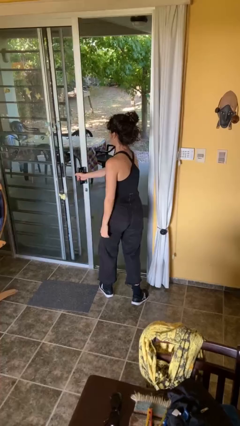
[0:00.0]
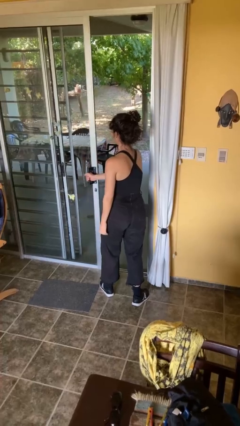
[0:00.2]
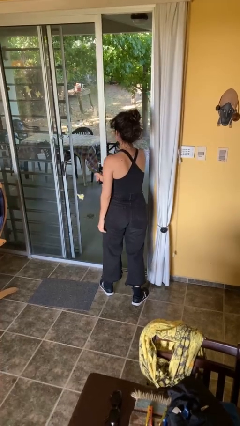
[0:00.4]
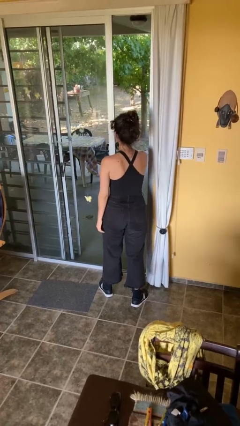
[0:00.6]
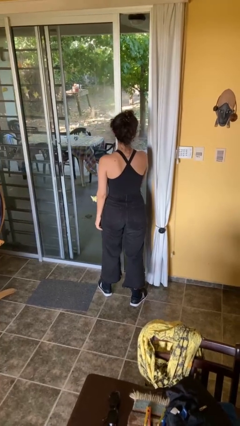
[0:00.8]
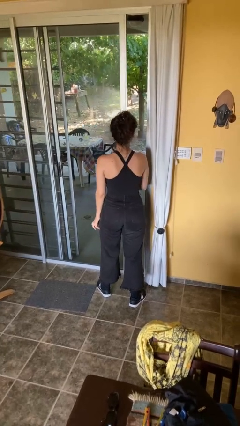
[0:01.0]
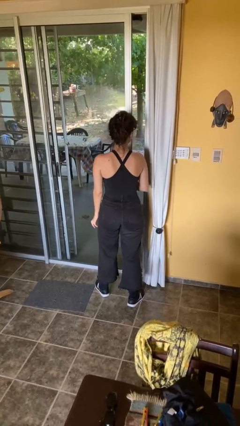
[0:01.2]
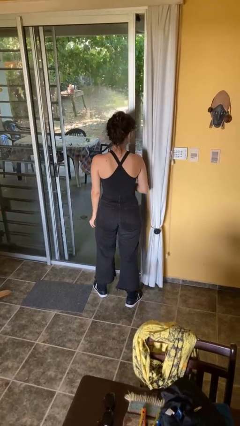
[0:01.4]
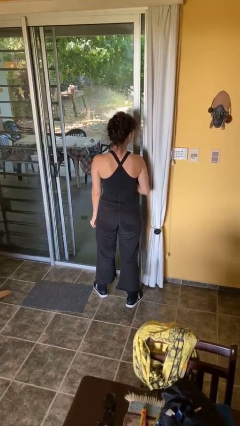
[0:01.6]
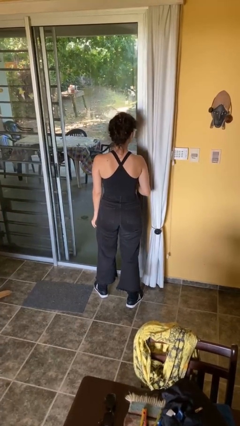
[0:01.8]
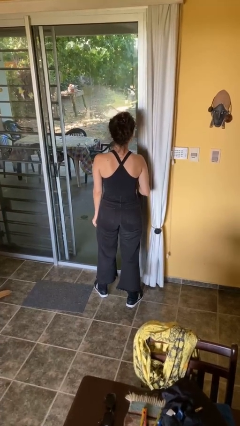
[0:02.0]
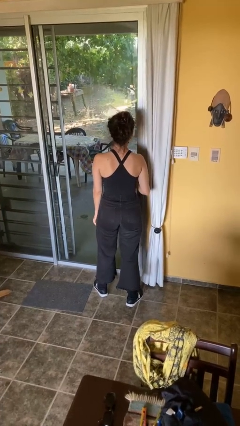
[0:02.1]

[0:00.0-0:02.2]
person closes facility door

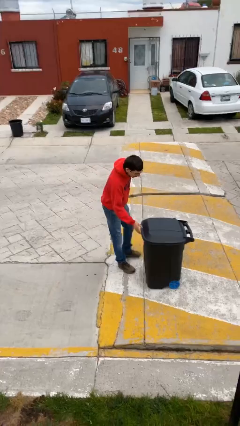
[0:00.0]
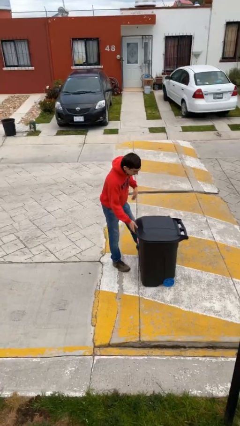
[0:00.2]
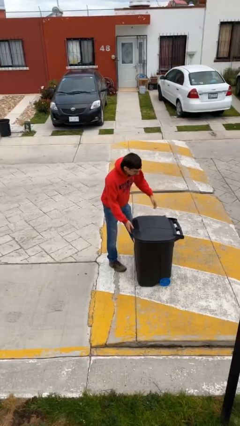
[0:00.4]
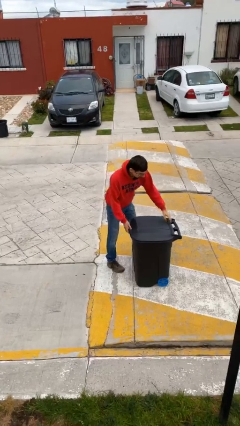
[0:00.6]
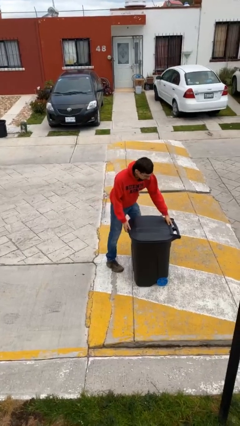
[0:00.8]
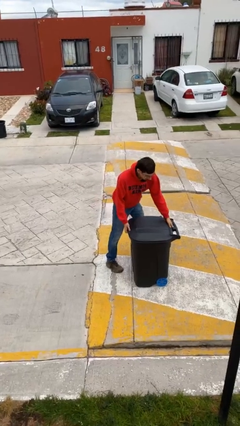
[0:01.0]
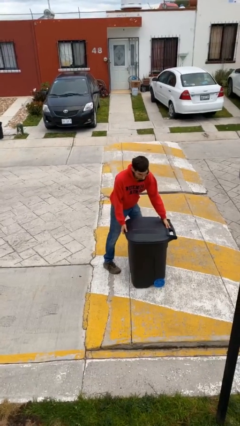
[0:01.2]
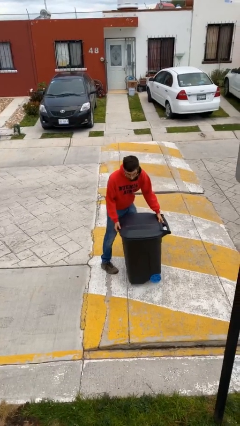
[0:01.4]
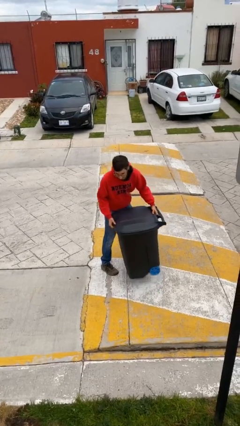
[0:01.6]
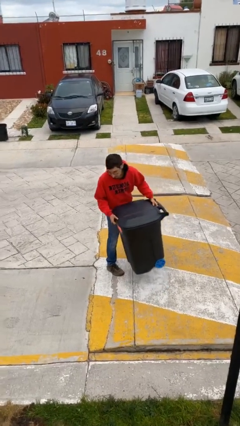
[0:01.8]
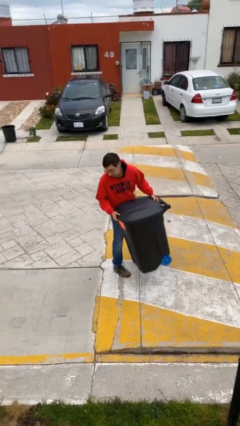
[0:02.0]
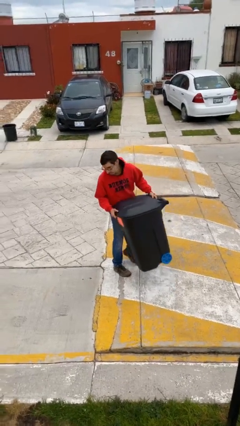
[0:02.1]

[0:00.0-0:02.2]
person picks up object from floor

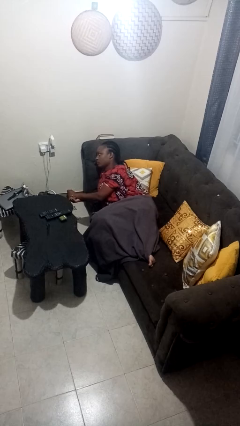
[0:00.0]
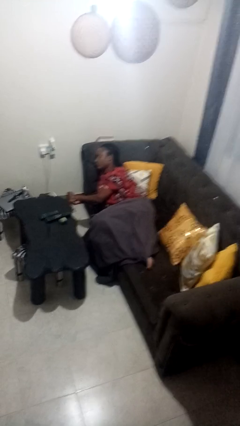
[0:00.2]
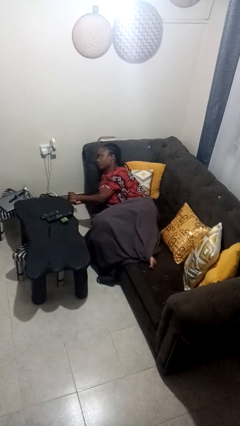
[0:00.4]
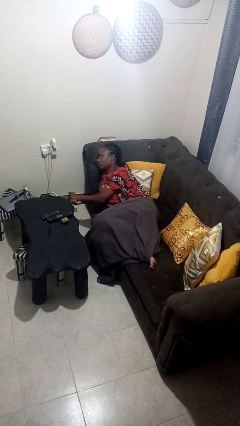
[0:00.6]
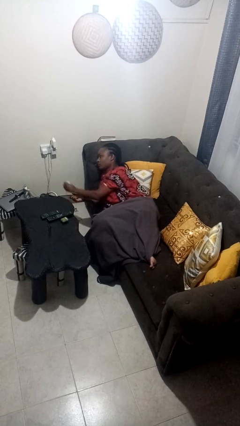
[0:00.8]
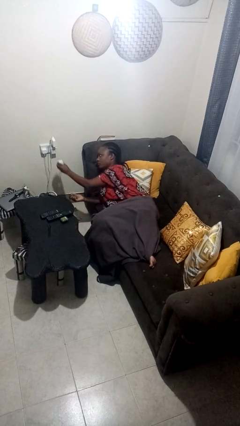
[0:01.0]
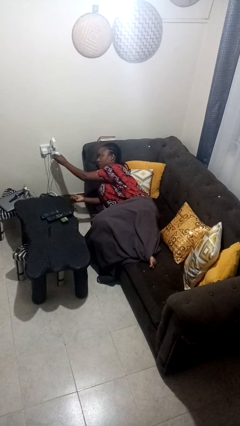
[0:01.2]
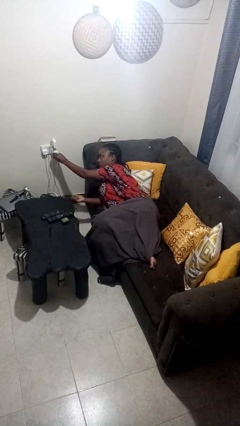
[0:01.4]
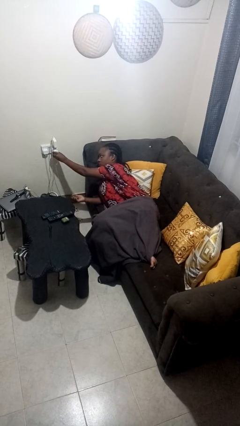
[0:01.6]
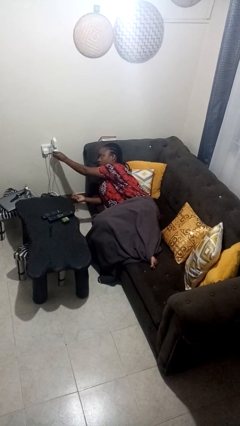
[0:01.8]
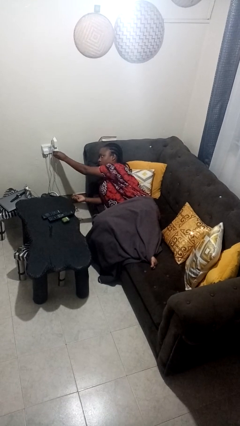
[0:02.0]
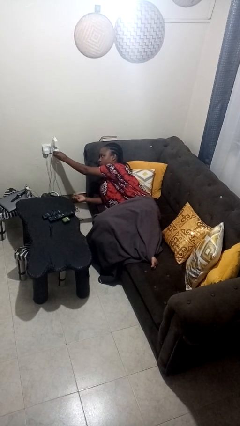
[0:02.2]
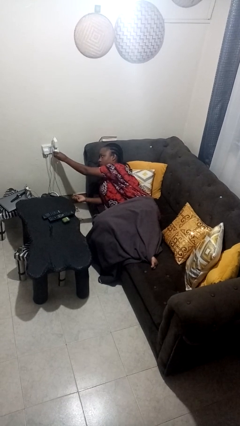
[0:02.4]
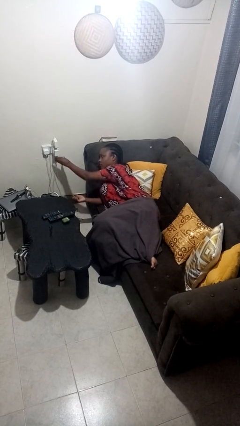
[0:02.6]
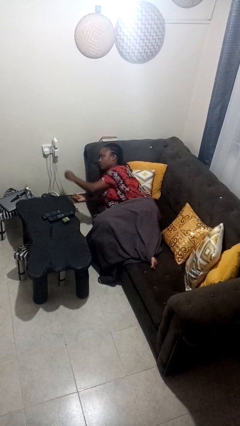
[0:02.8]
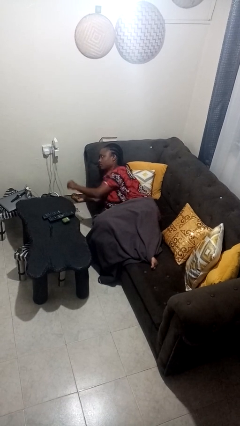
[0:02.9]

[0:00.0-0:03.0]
person plugs into electrical socket

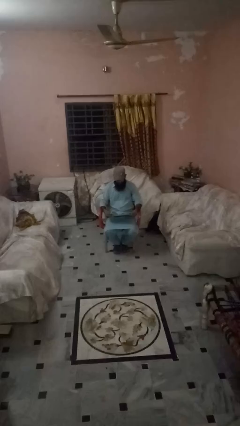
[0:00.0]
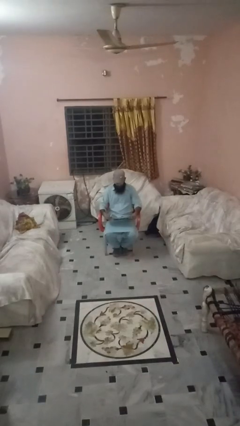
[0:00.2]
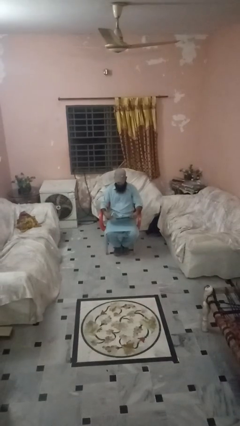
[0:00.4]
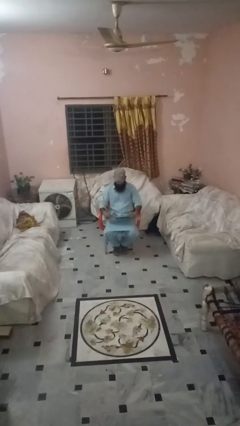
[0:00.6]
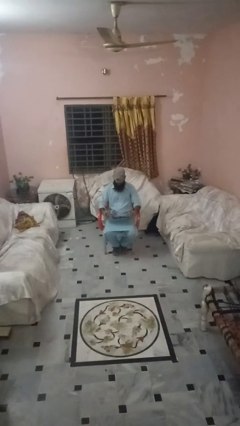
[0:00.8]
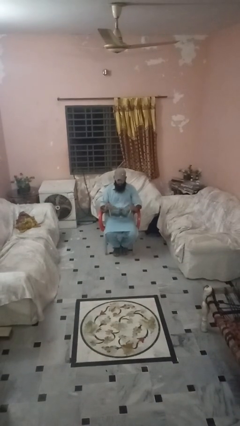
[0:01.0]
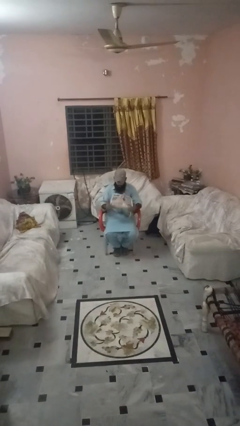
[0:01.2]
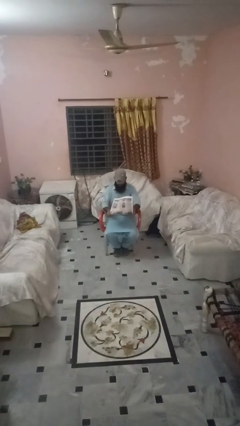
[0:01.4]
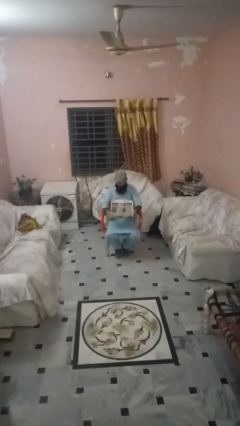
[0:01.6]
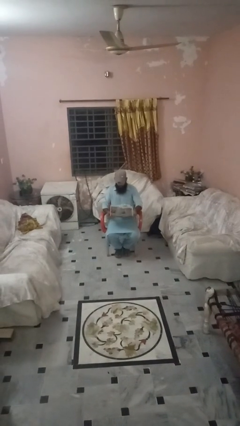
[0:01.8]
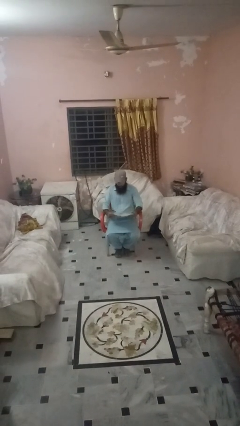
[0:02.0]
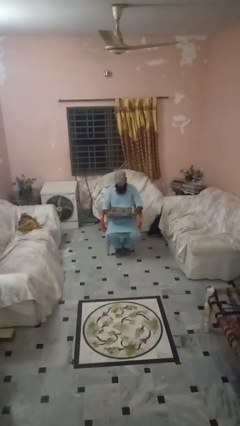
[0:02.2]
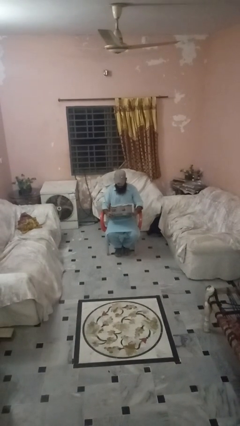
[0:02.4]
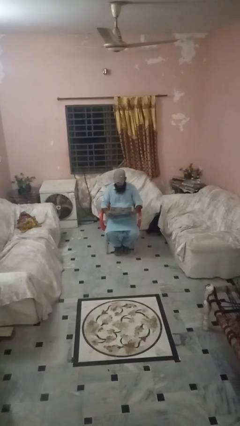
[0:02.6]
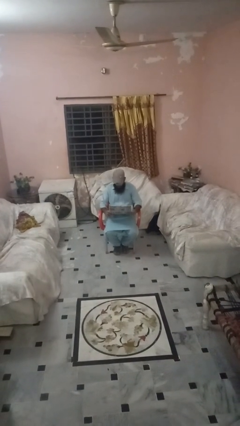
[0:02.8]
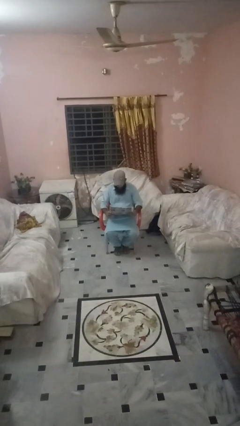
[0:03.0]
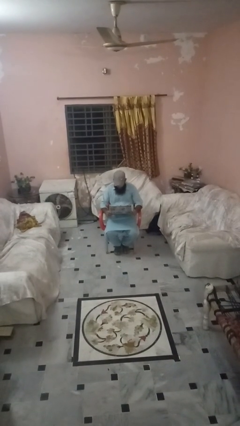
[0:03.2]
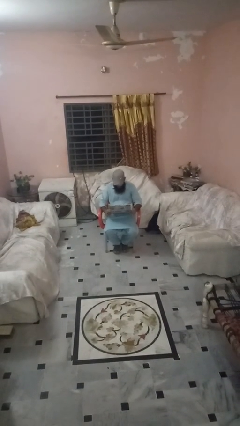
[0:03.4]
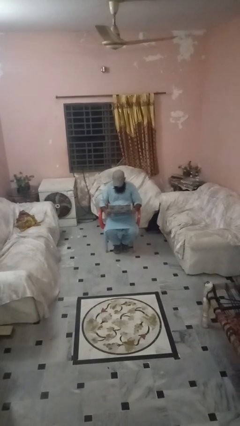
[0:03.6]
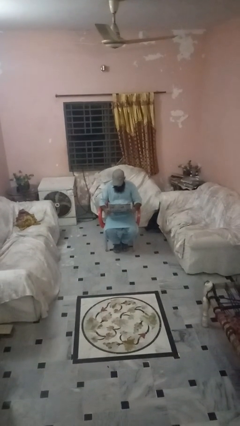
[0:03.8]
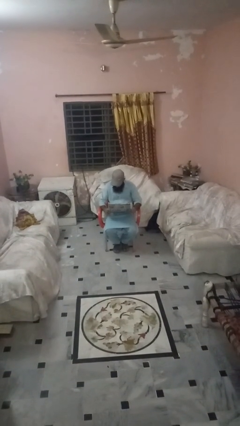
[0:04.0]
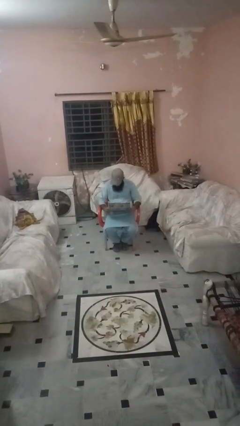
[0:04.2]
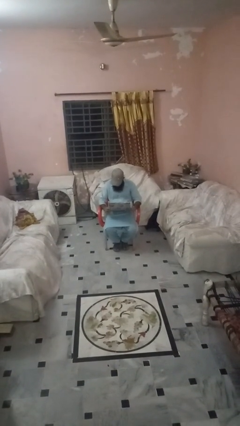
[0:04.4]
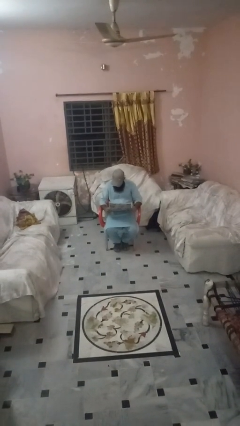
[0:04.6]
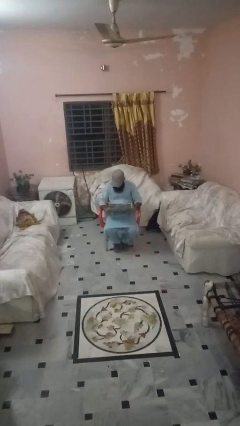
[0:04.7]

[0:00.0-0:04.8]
person reads newspaper

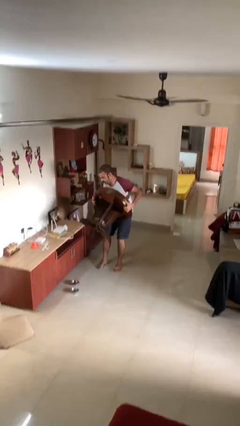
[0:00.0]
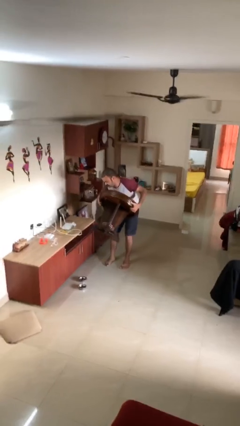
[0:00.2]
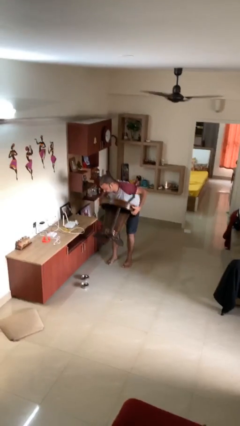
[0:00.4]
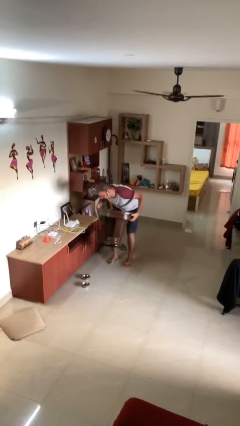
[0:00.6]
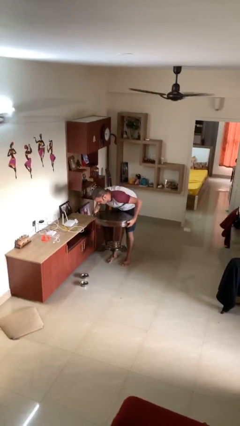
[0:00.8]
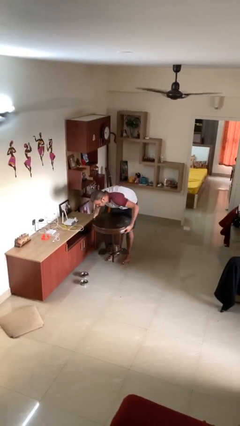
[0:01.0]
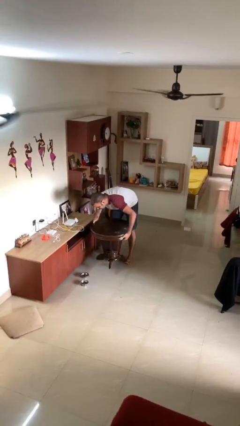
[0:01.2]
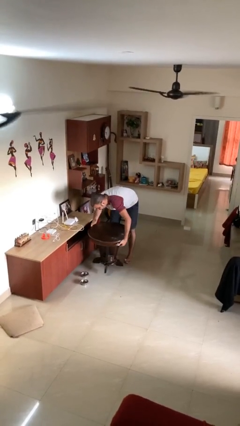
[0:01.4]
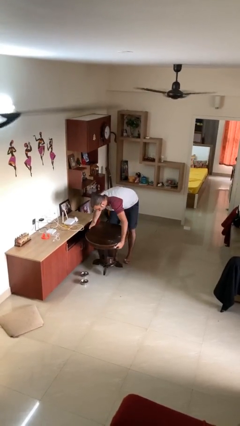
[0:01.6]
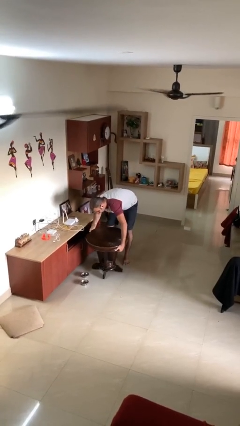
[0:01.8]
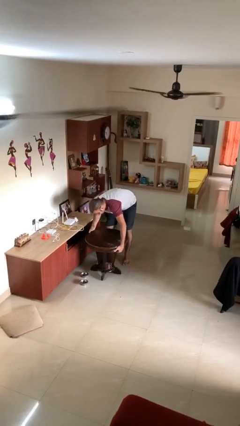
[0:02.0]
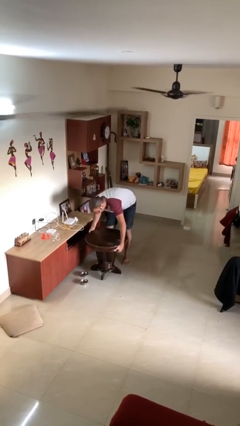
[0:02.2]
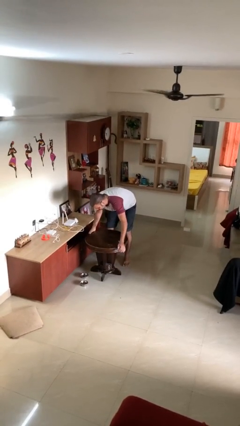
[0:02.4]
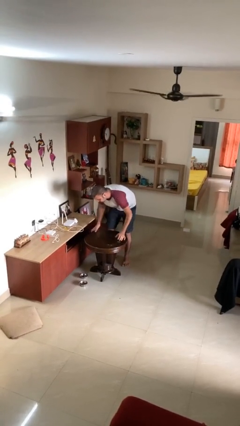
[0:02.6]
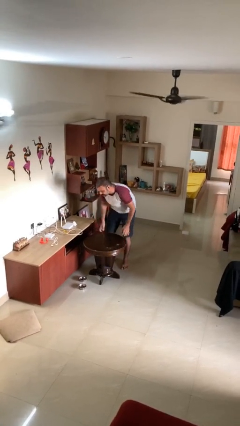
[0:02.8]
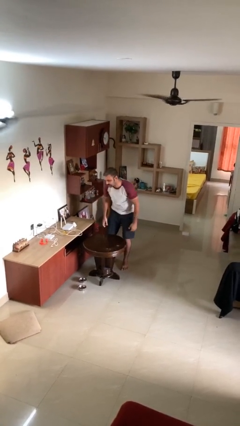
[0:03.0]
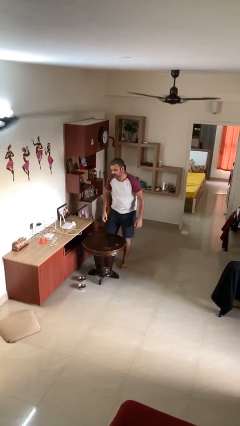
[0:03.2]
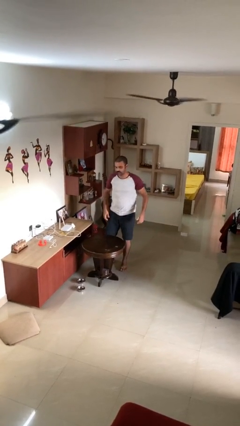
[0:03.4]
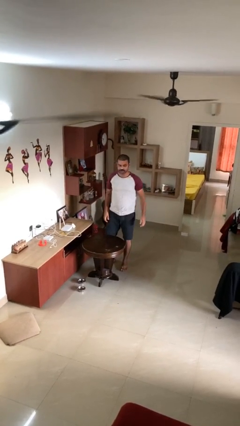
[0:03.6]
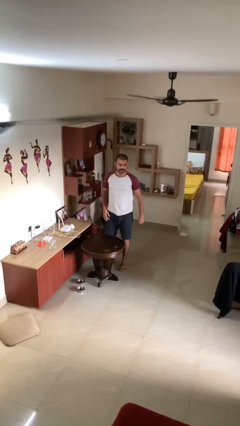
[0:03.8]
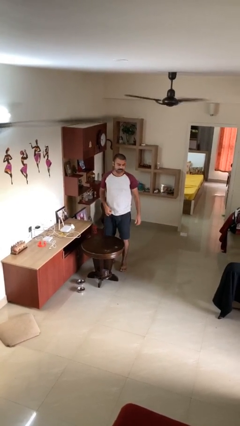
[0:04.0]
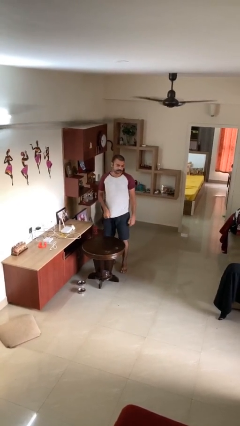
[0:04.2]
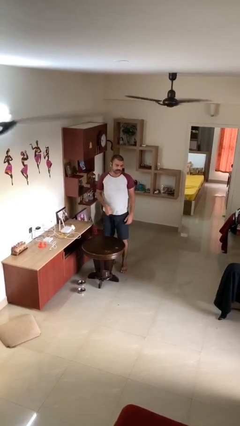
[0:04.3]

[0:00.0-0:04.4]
person puts down object on floor

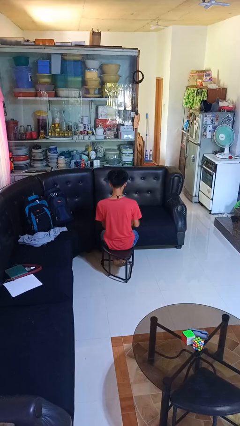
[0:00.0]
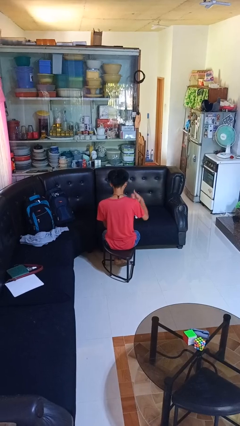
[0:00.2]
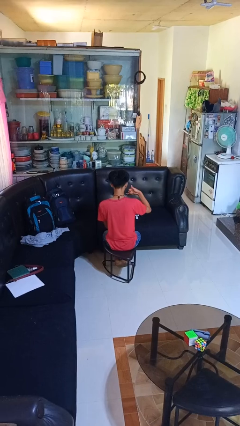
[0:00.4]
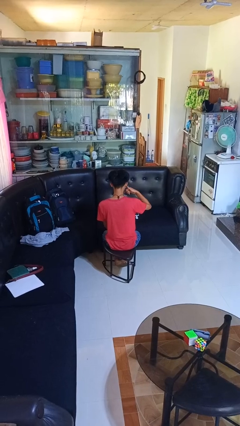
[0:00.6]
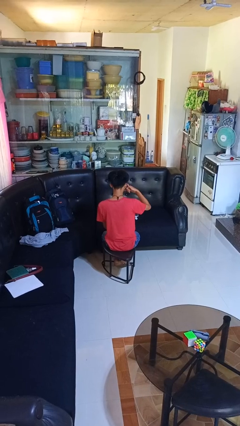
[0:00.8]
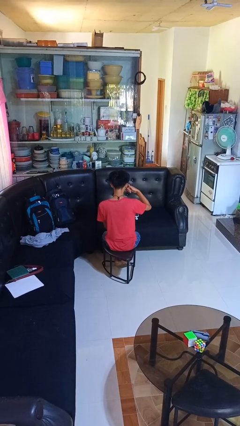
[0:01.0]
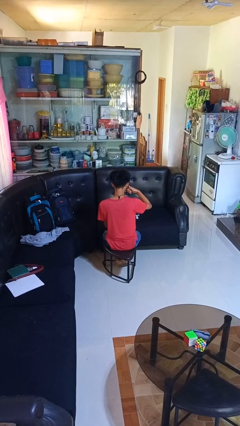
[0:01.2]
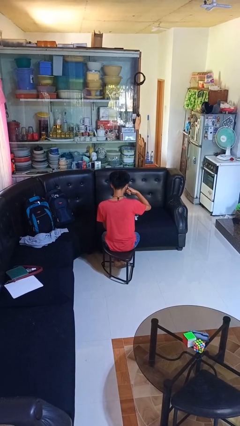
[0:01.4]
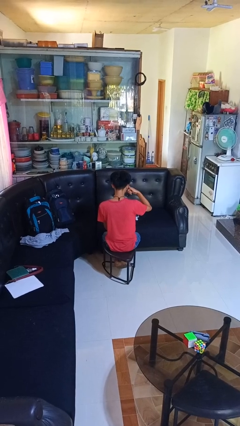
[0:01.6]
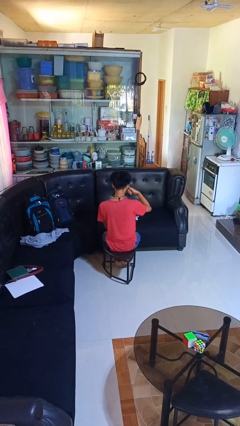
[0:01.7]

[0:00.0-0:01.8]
person gestures call me
